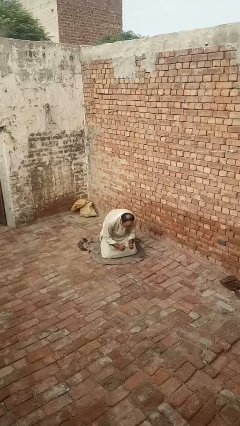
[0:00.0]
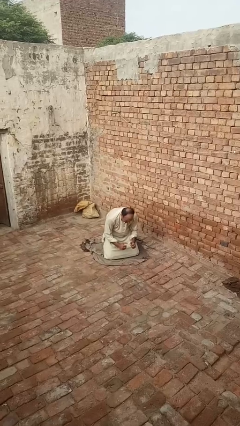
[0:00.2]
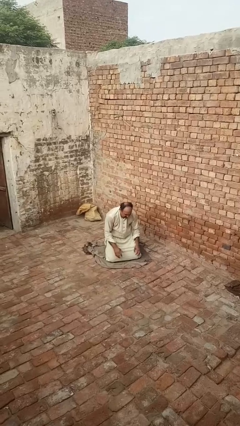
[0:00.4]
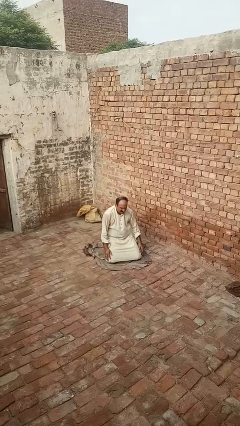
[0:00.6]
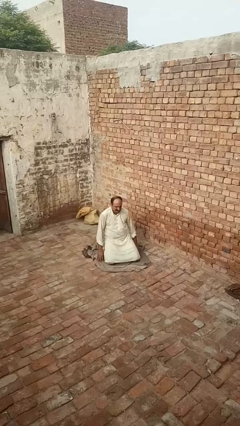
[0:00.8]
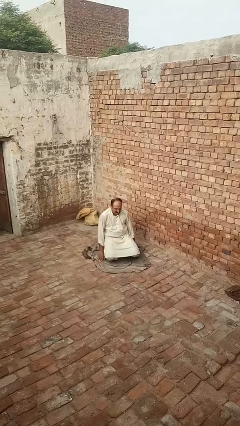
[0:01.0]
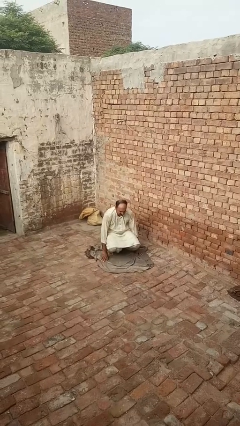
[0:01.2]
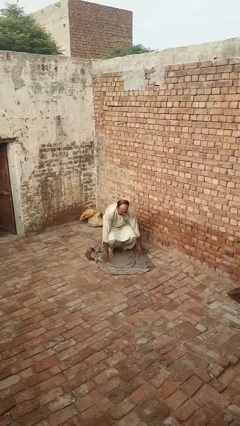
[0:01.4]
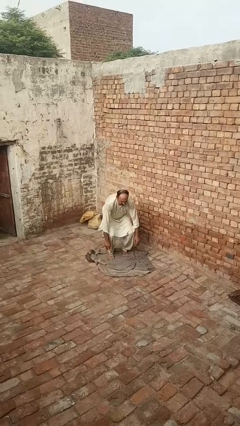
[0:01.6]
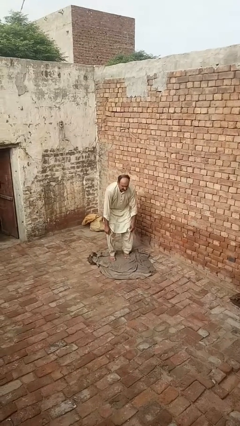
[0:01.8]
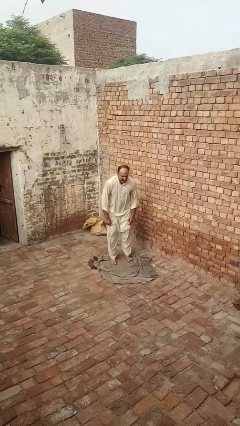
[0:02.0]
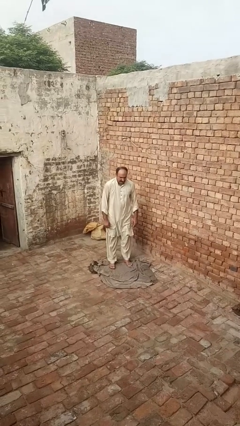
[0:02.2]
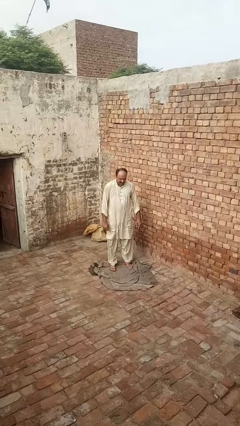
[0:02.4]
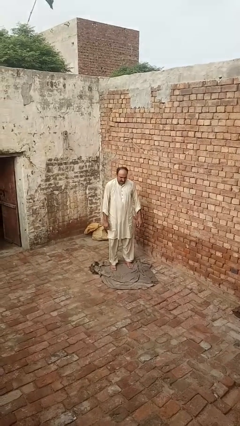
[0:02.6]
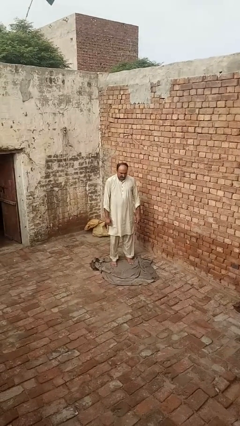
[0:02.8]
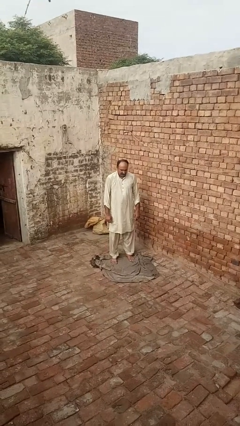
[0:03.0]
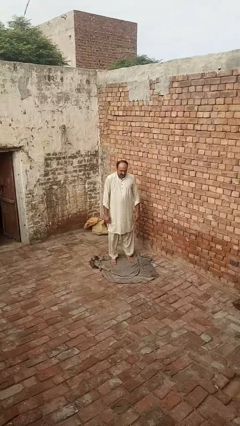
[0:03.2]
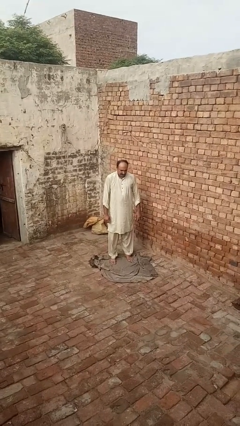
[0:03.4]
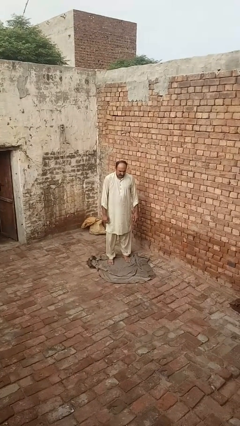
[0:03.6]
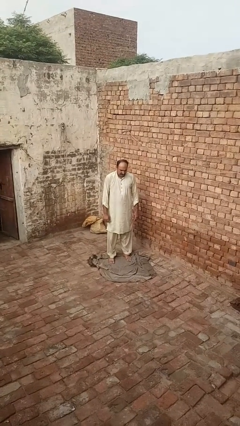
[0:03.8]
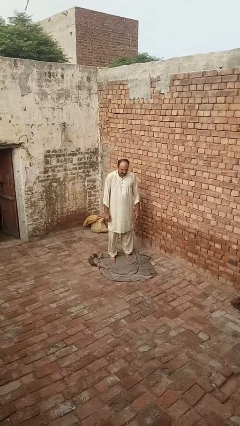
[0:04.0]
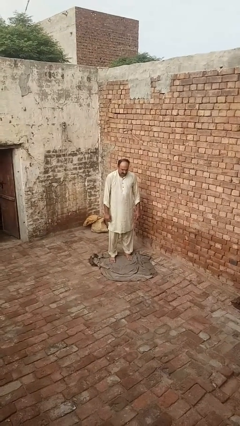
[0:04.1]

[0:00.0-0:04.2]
person stands up from floor

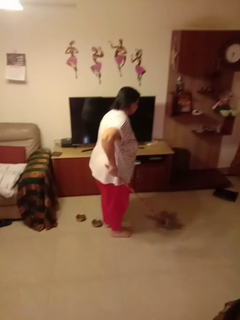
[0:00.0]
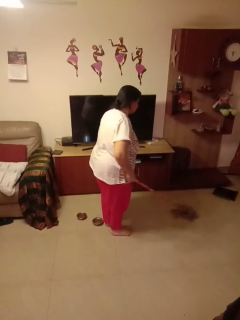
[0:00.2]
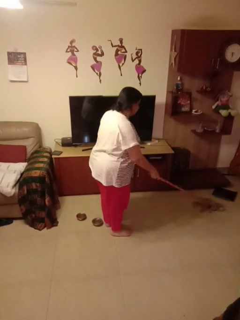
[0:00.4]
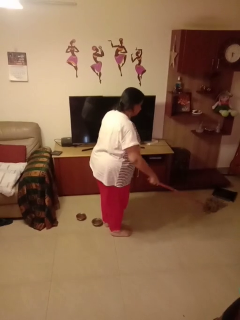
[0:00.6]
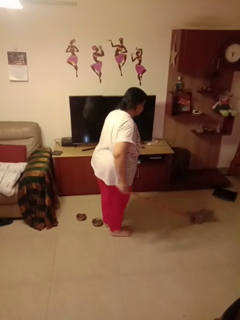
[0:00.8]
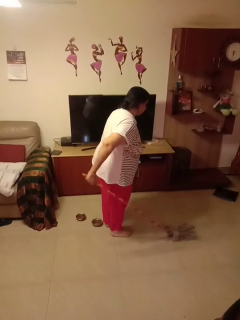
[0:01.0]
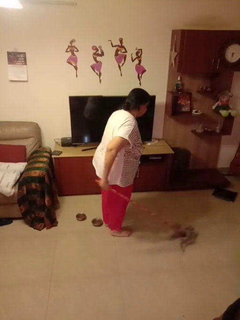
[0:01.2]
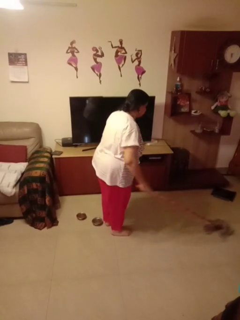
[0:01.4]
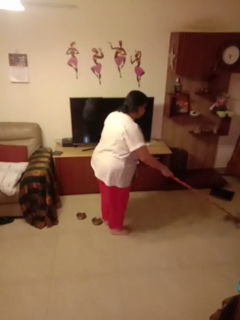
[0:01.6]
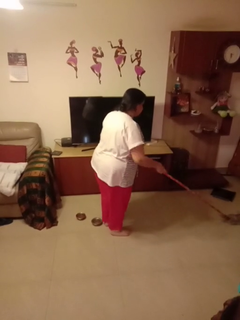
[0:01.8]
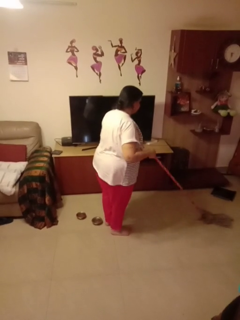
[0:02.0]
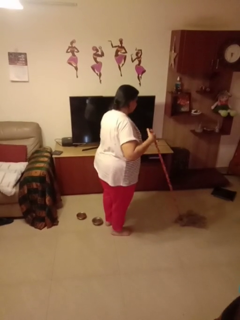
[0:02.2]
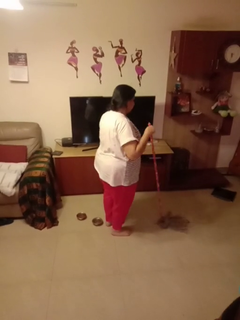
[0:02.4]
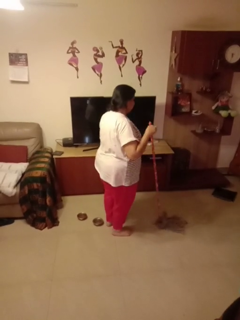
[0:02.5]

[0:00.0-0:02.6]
person mops

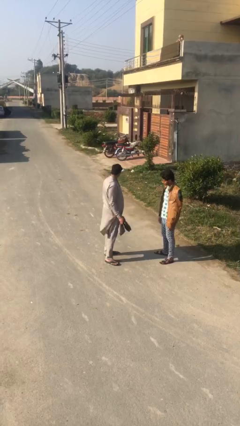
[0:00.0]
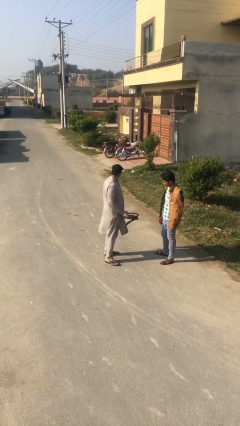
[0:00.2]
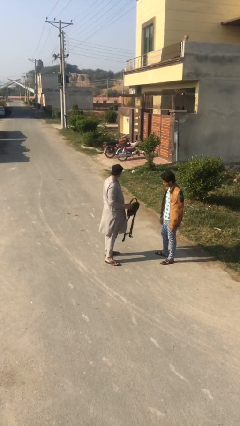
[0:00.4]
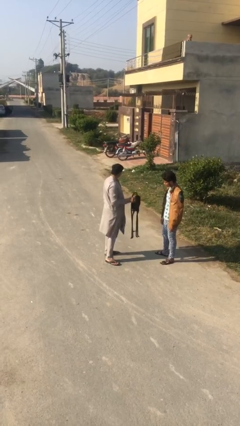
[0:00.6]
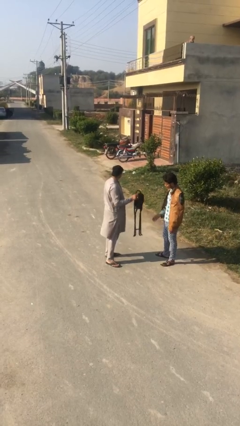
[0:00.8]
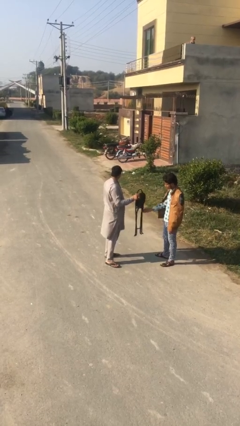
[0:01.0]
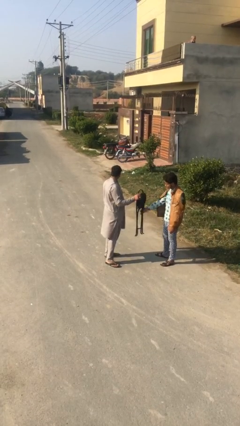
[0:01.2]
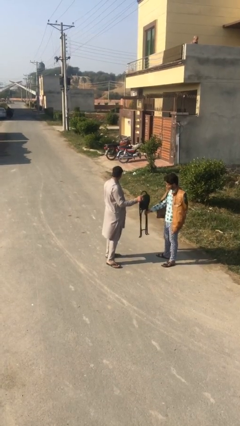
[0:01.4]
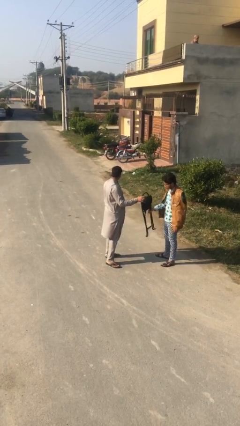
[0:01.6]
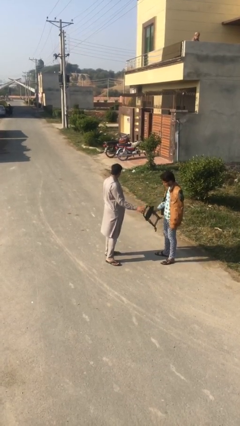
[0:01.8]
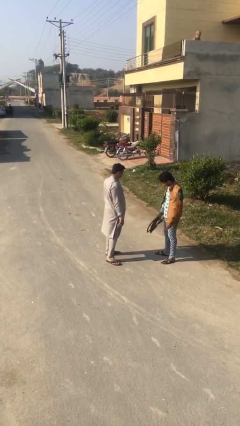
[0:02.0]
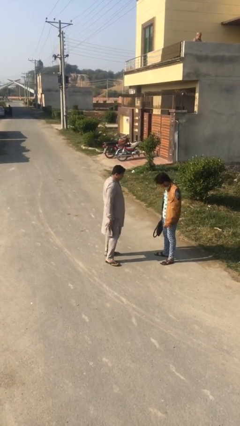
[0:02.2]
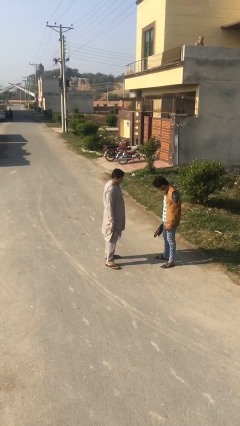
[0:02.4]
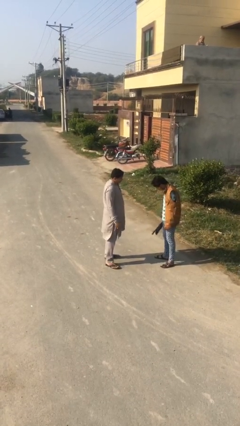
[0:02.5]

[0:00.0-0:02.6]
person transfers object to person

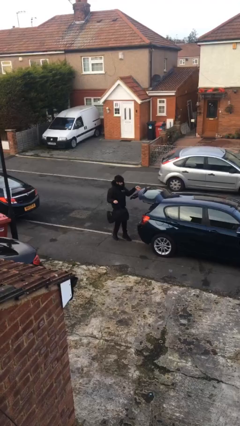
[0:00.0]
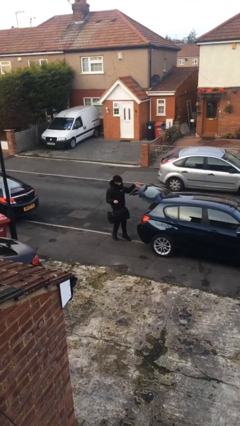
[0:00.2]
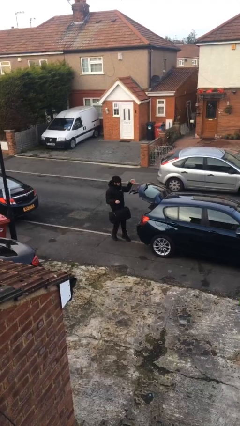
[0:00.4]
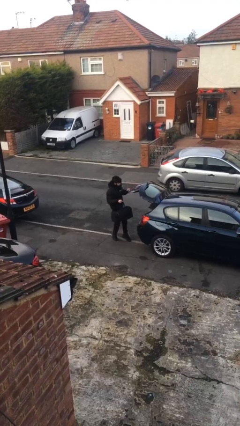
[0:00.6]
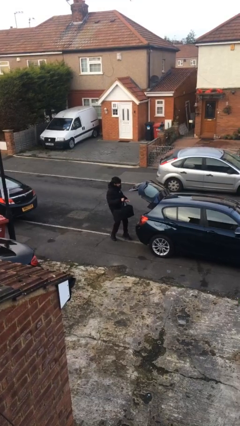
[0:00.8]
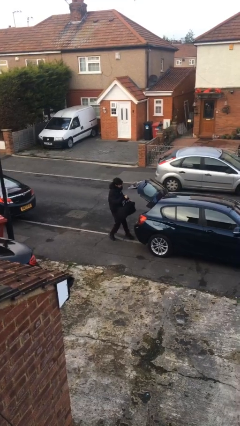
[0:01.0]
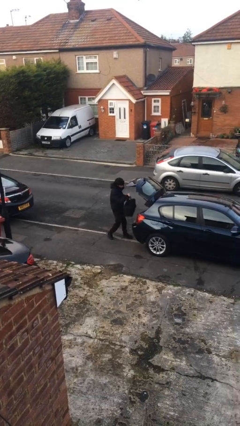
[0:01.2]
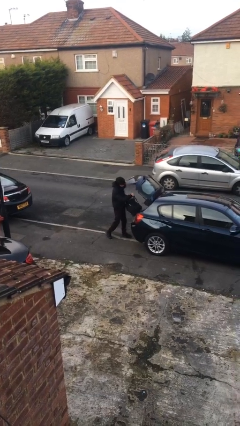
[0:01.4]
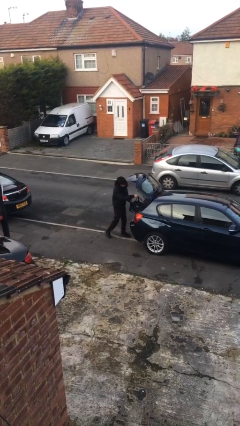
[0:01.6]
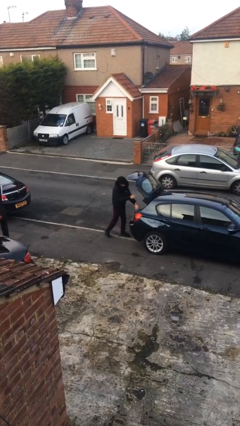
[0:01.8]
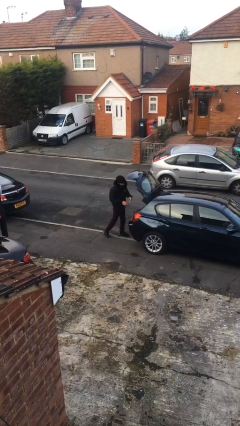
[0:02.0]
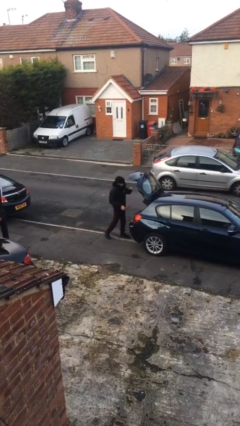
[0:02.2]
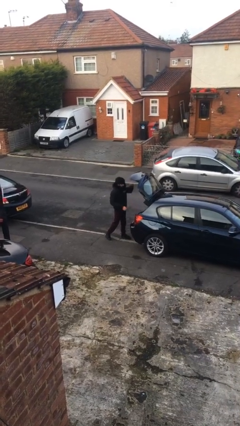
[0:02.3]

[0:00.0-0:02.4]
person loads car

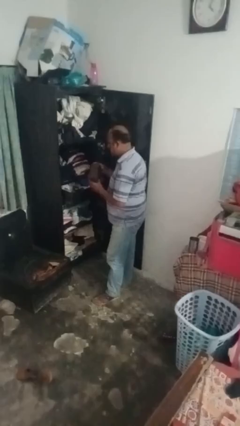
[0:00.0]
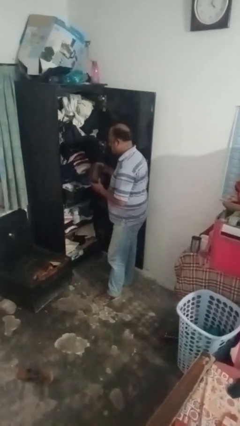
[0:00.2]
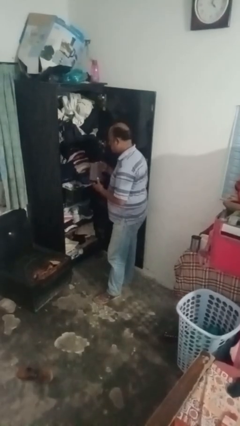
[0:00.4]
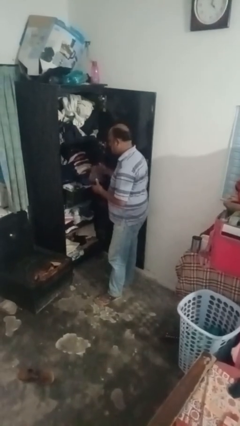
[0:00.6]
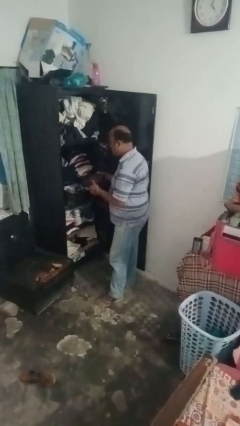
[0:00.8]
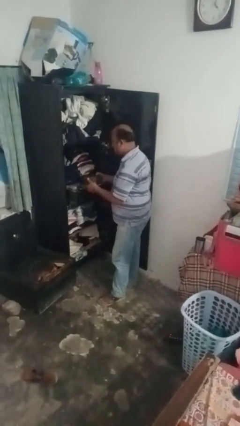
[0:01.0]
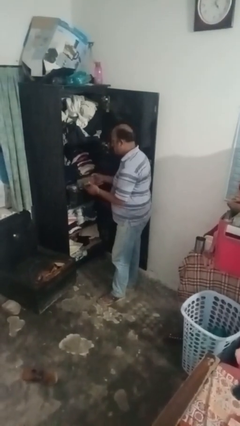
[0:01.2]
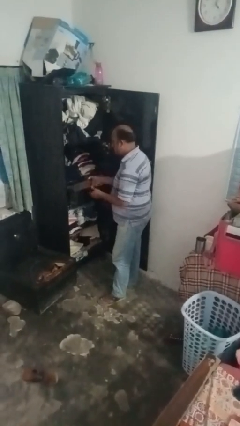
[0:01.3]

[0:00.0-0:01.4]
person takes clothes from dresser

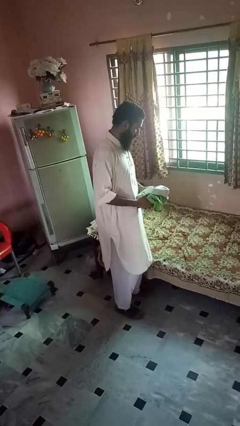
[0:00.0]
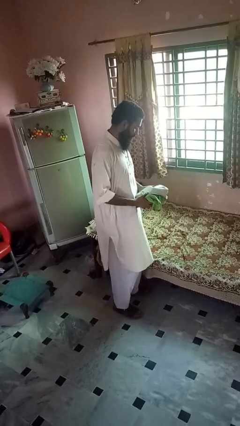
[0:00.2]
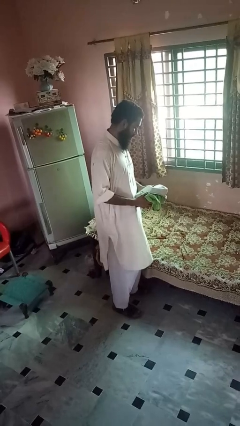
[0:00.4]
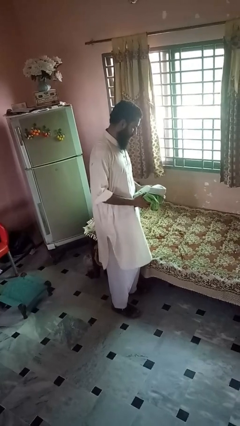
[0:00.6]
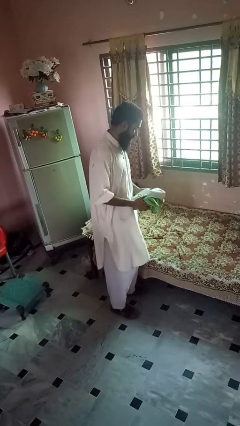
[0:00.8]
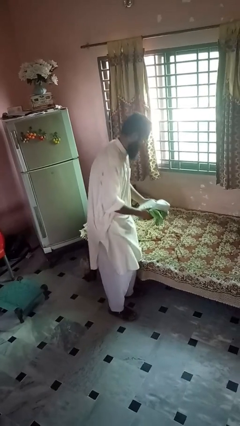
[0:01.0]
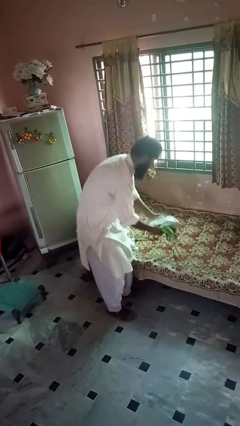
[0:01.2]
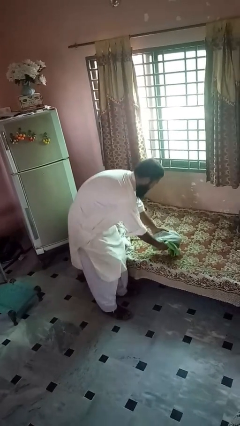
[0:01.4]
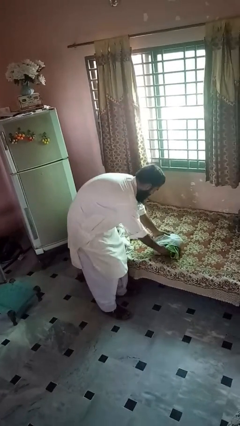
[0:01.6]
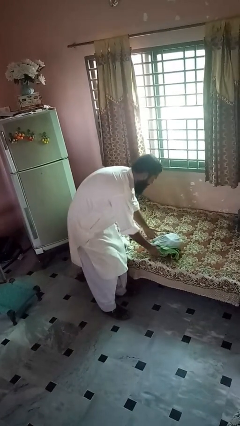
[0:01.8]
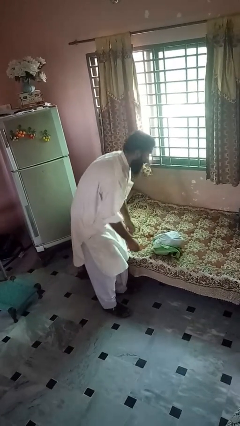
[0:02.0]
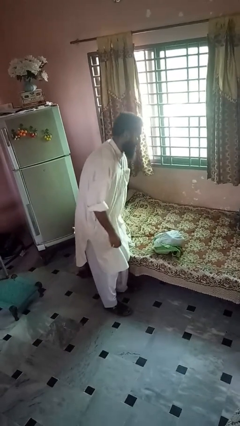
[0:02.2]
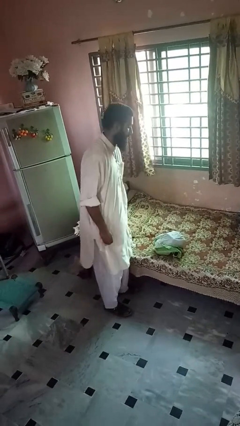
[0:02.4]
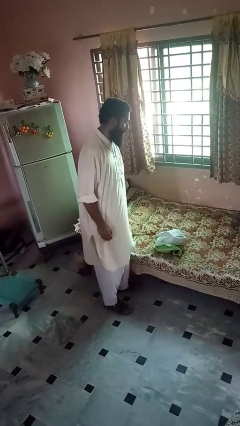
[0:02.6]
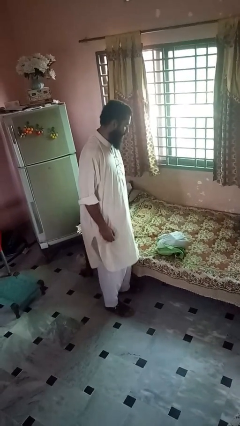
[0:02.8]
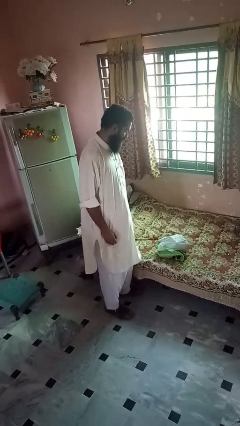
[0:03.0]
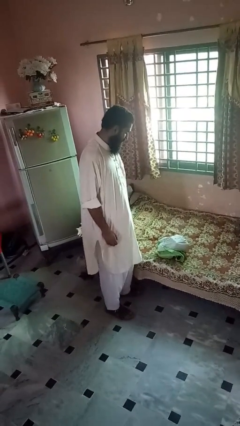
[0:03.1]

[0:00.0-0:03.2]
person puts down object on bed

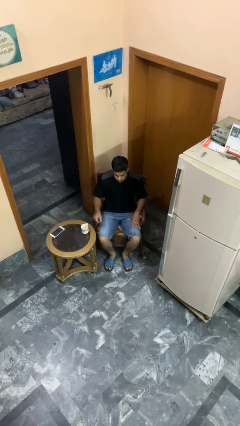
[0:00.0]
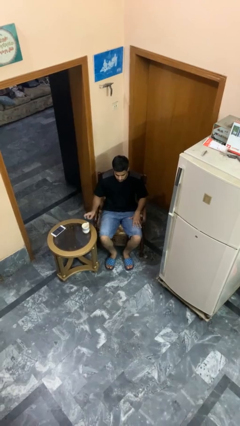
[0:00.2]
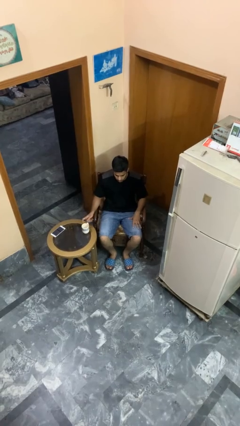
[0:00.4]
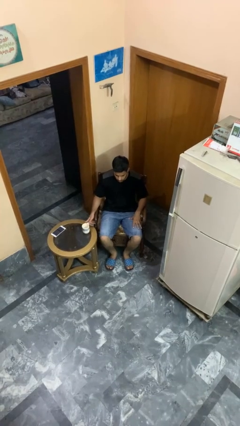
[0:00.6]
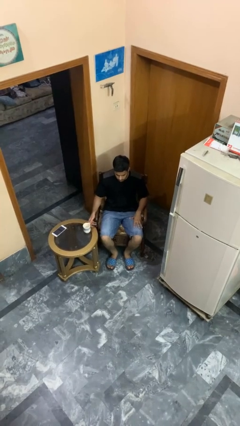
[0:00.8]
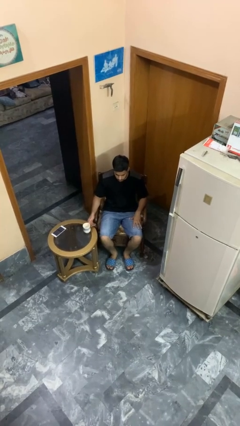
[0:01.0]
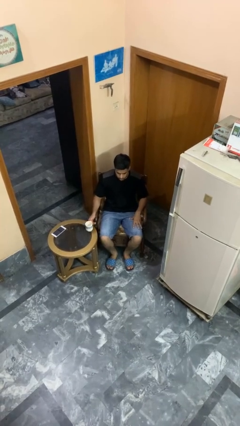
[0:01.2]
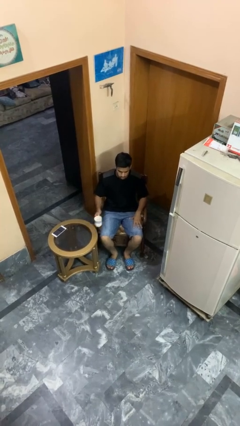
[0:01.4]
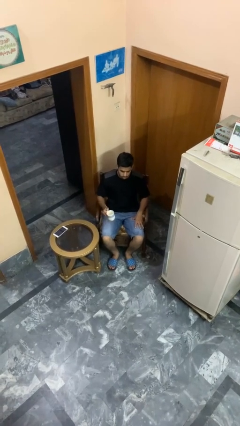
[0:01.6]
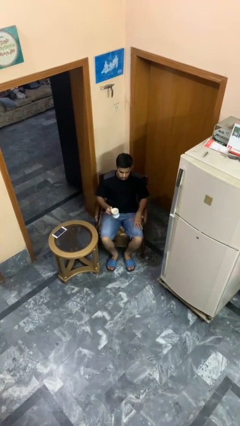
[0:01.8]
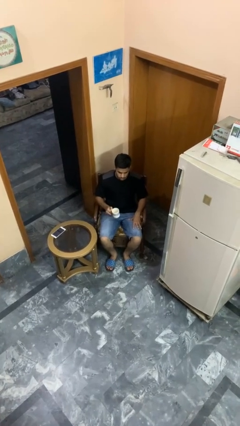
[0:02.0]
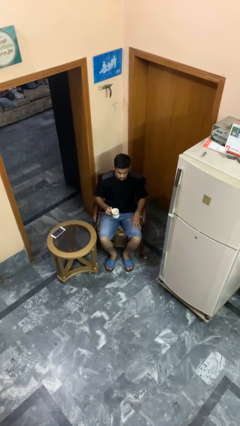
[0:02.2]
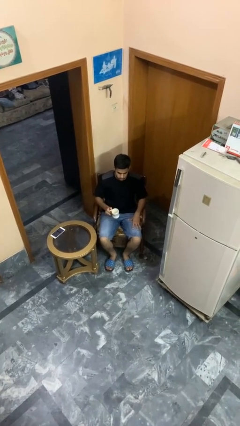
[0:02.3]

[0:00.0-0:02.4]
person picks up object from table
